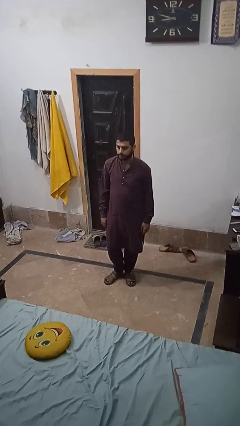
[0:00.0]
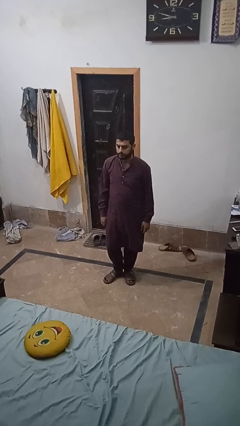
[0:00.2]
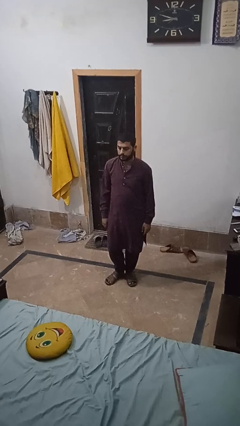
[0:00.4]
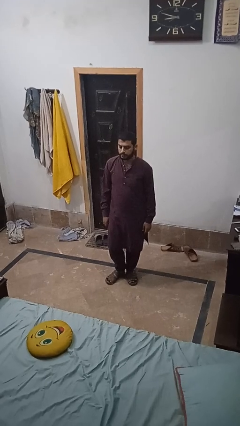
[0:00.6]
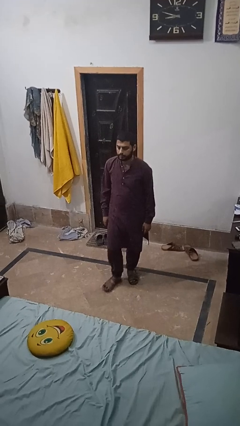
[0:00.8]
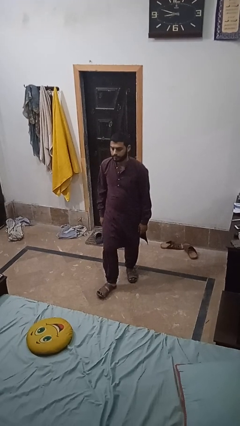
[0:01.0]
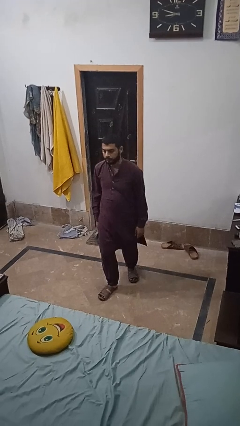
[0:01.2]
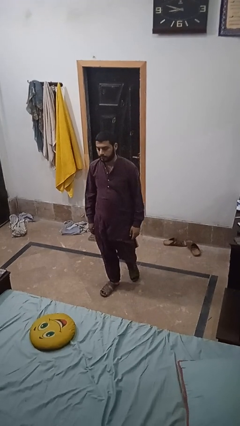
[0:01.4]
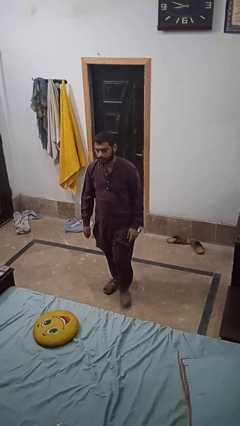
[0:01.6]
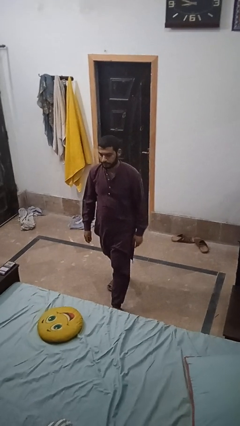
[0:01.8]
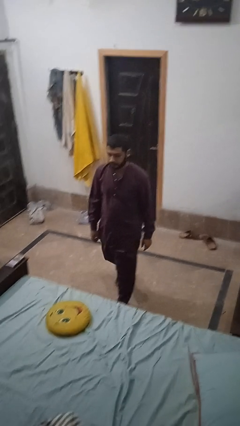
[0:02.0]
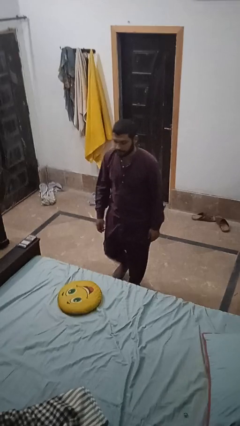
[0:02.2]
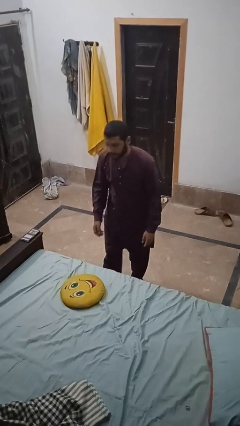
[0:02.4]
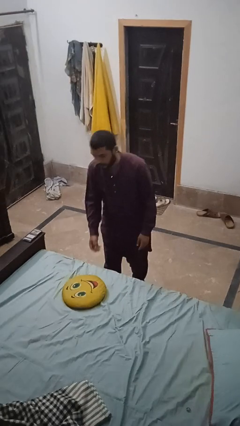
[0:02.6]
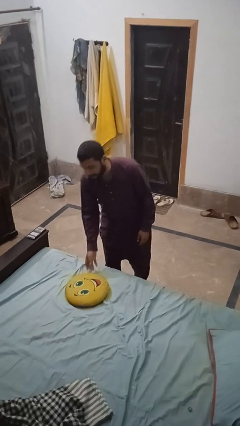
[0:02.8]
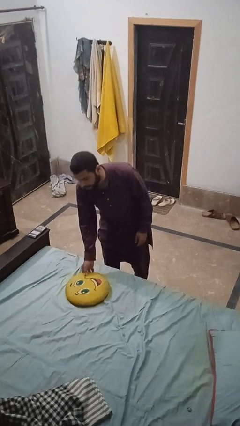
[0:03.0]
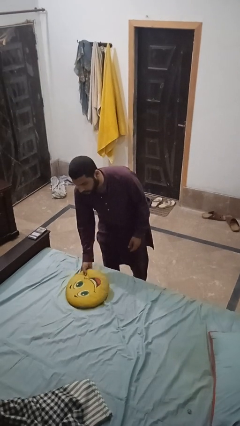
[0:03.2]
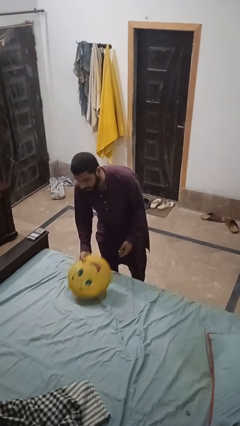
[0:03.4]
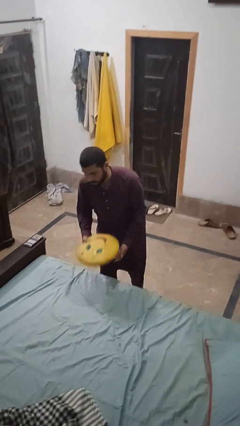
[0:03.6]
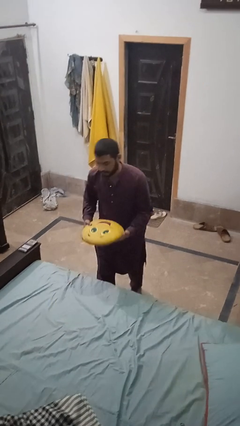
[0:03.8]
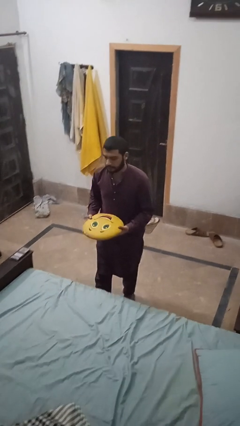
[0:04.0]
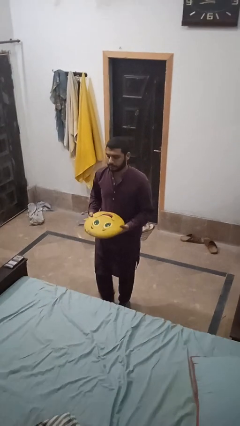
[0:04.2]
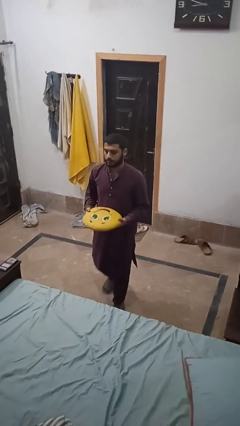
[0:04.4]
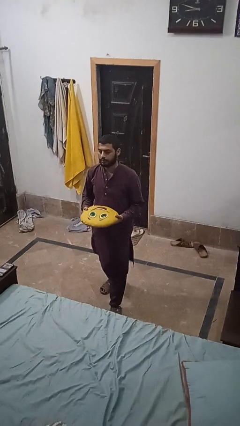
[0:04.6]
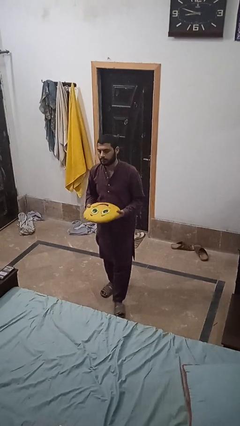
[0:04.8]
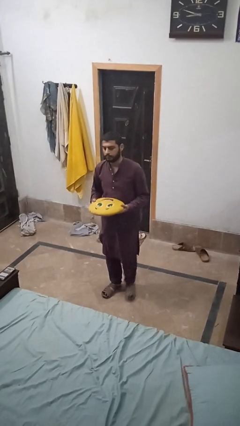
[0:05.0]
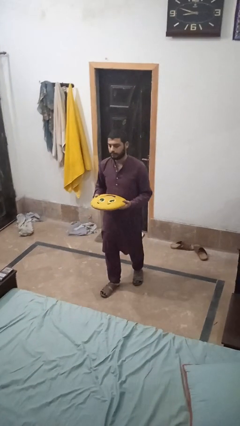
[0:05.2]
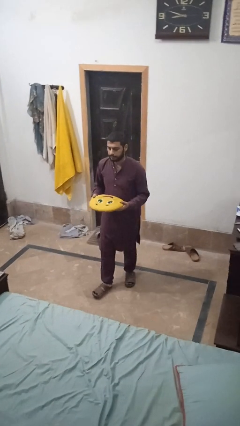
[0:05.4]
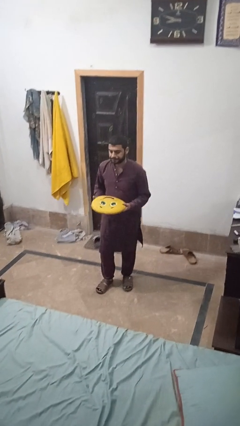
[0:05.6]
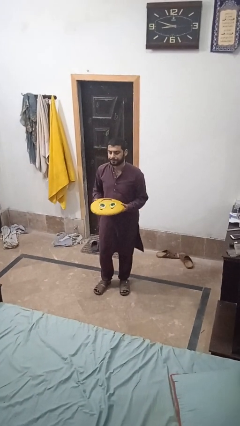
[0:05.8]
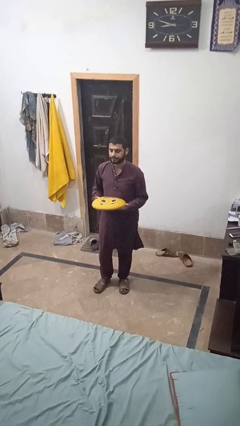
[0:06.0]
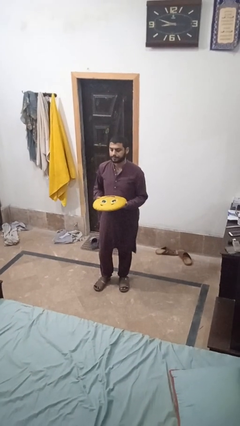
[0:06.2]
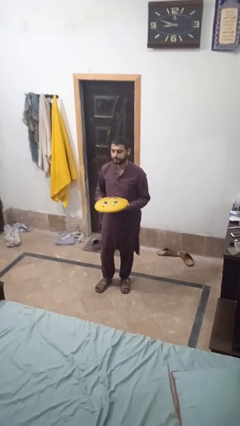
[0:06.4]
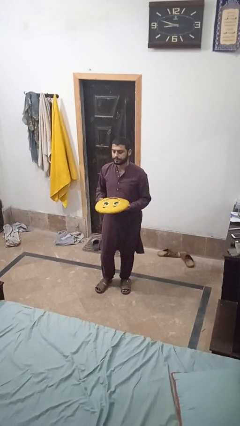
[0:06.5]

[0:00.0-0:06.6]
person picks up object from bed

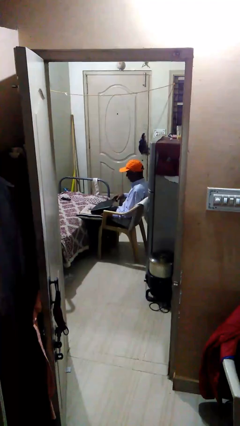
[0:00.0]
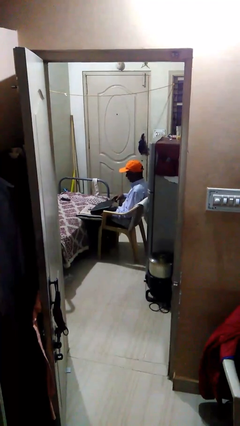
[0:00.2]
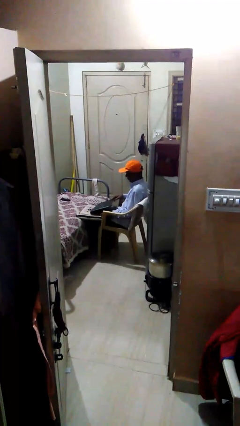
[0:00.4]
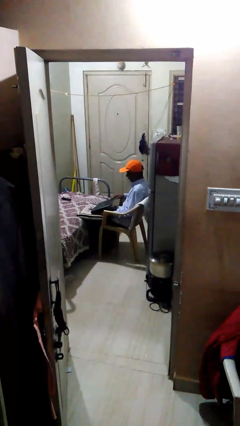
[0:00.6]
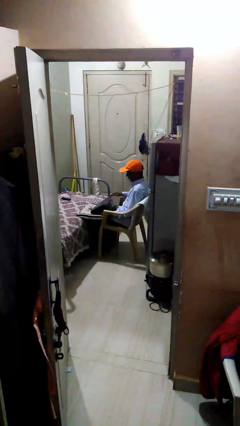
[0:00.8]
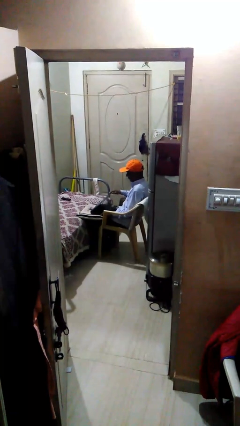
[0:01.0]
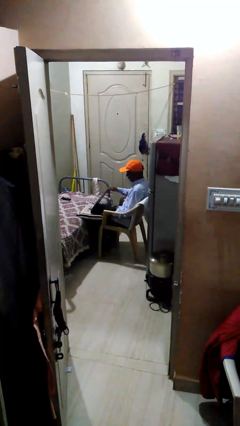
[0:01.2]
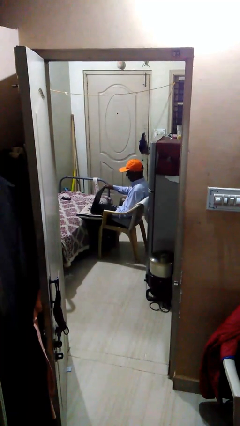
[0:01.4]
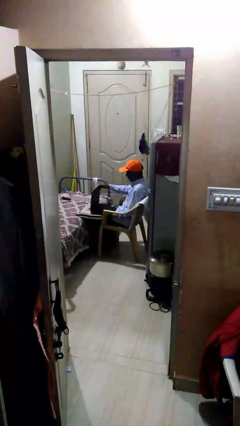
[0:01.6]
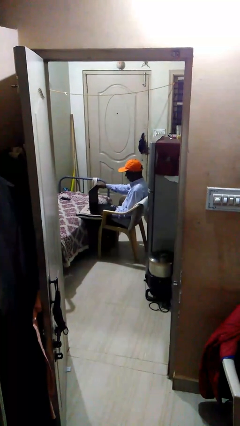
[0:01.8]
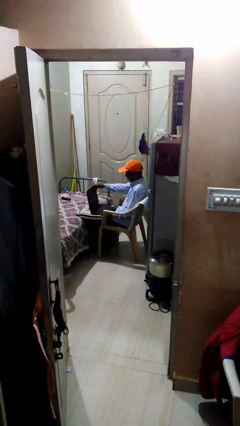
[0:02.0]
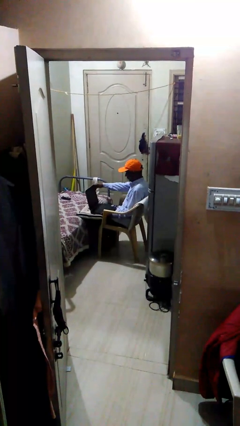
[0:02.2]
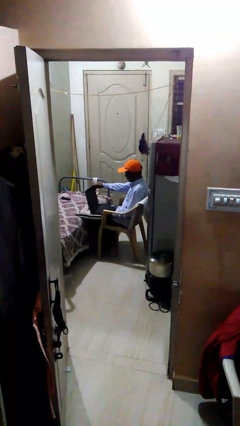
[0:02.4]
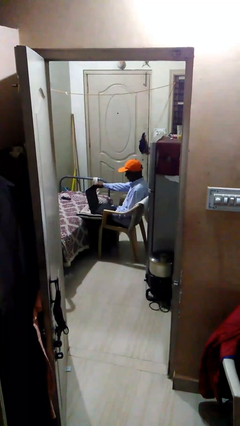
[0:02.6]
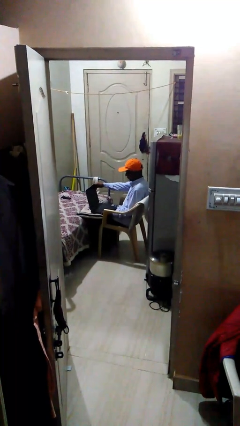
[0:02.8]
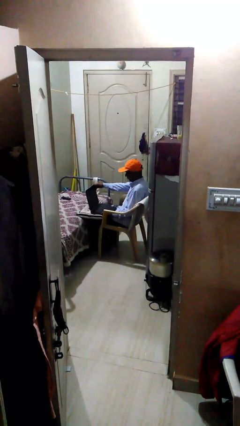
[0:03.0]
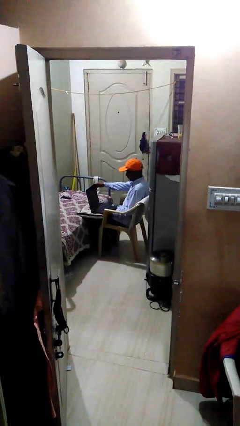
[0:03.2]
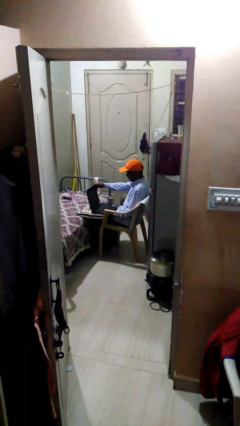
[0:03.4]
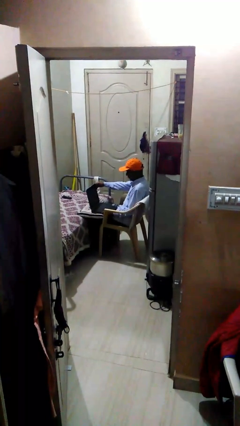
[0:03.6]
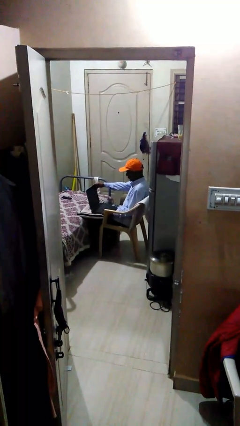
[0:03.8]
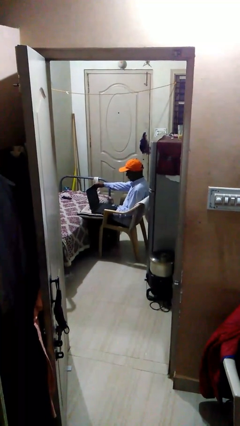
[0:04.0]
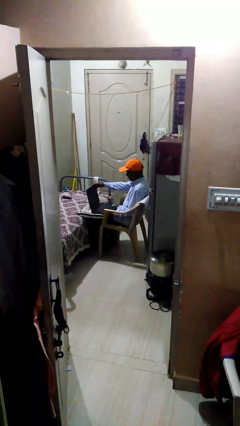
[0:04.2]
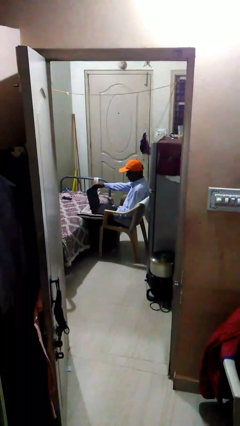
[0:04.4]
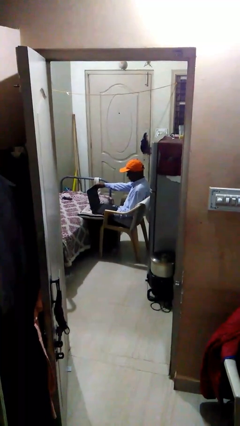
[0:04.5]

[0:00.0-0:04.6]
person interacts with laptop

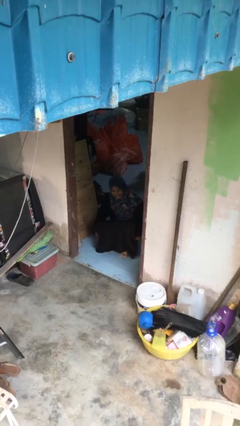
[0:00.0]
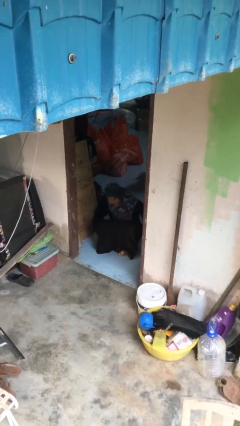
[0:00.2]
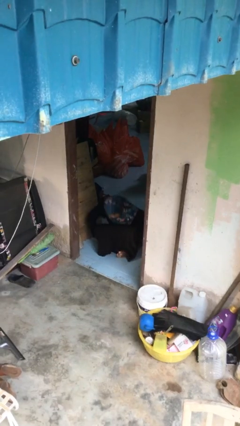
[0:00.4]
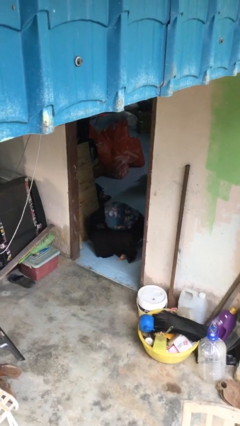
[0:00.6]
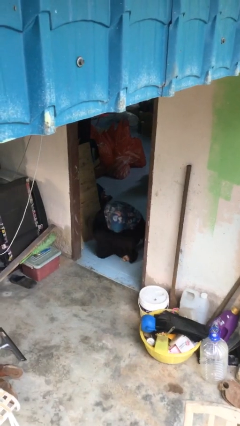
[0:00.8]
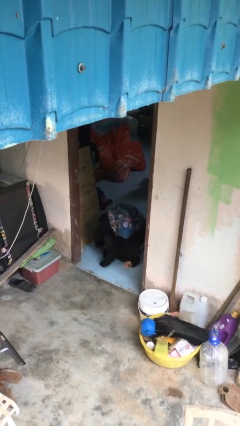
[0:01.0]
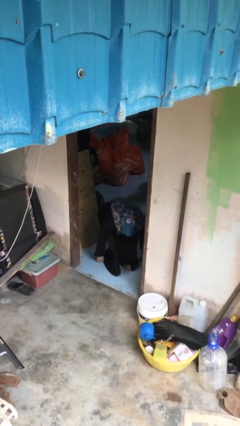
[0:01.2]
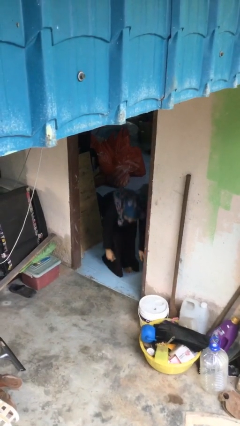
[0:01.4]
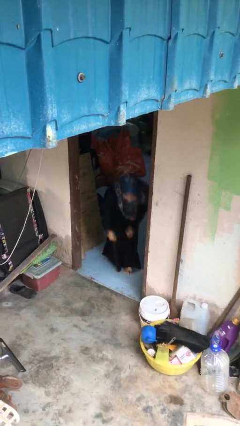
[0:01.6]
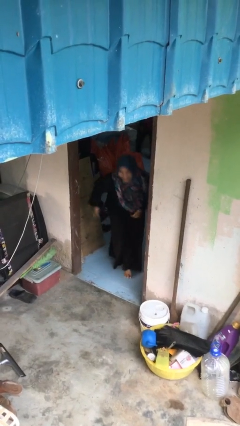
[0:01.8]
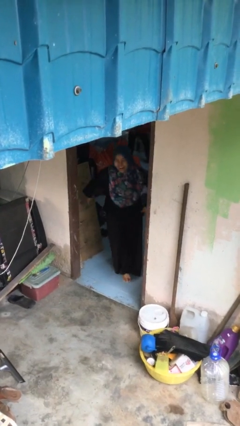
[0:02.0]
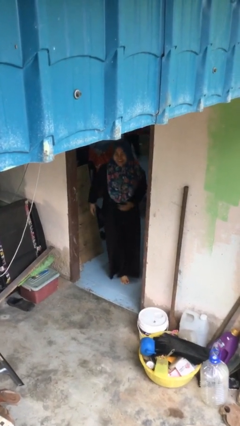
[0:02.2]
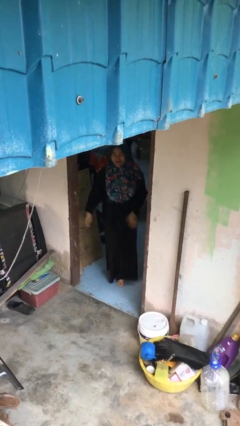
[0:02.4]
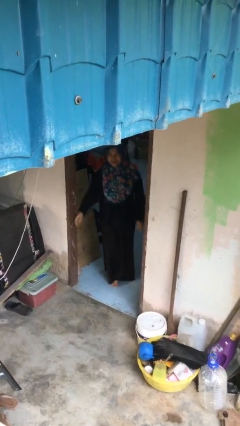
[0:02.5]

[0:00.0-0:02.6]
person stands up

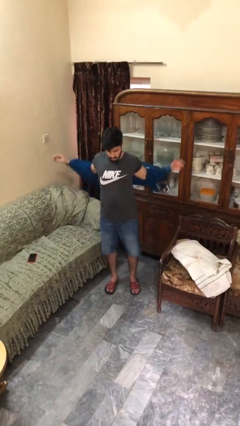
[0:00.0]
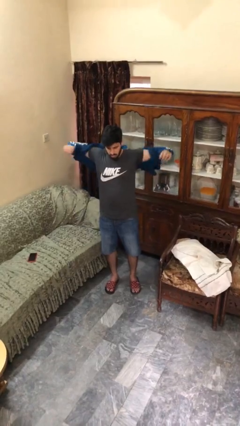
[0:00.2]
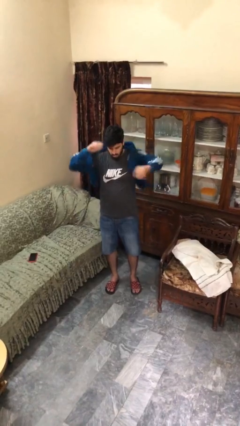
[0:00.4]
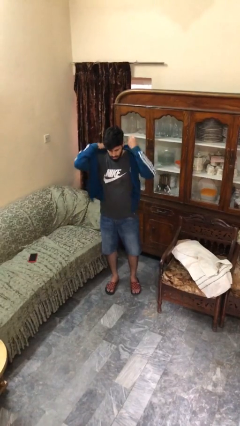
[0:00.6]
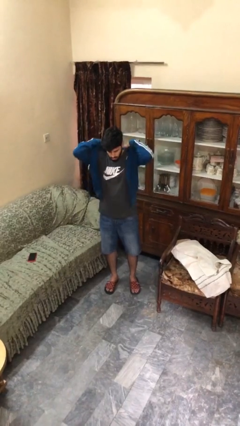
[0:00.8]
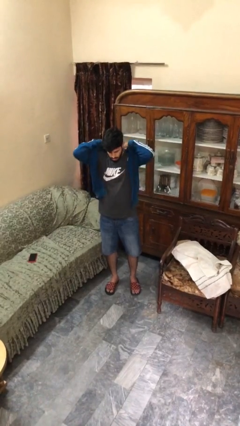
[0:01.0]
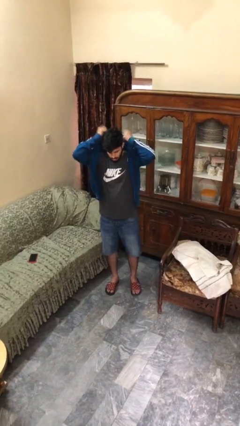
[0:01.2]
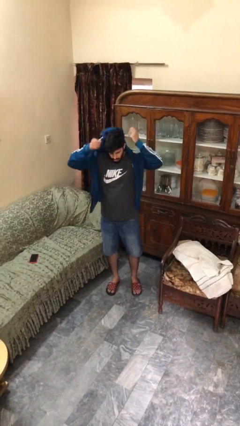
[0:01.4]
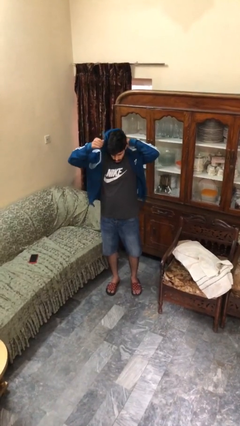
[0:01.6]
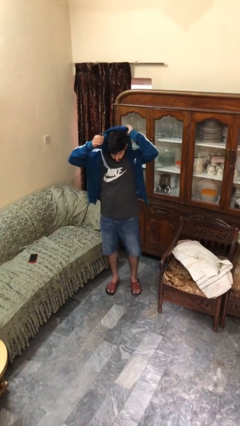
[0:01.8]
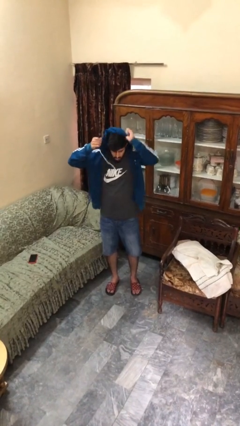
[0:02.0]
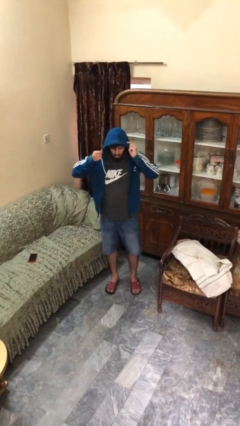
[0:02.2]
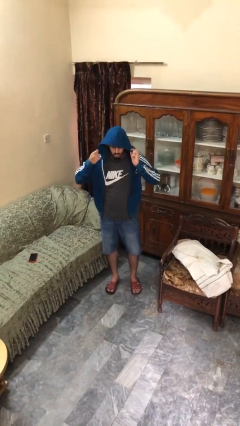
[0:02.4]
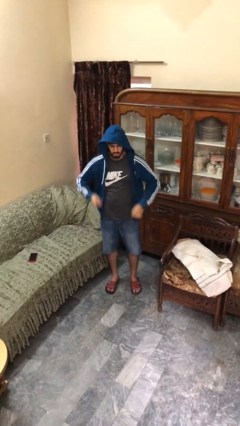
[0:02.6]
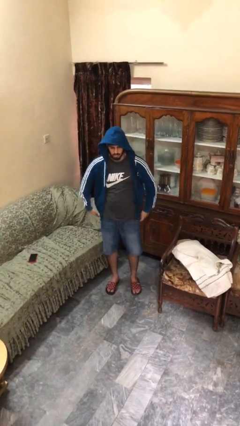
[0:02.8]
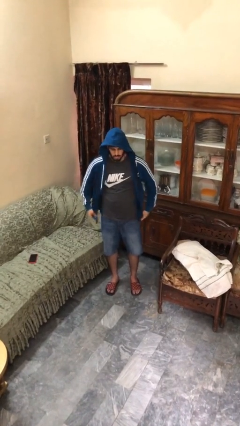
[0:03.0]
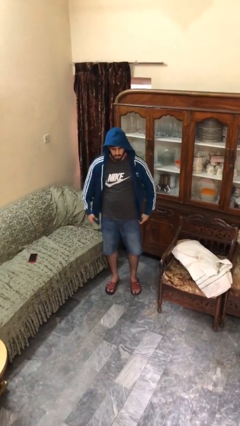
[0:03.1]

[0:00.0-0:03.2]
person puts on hoodie

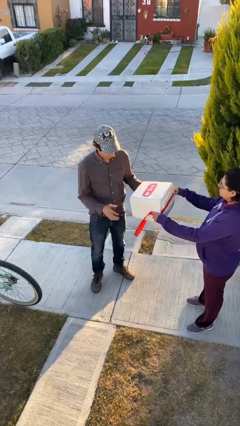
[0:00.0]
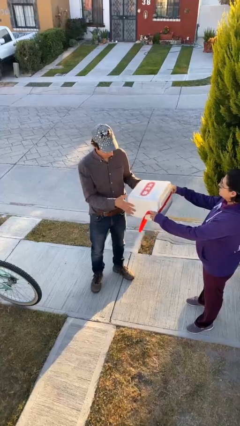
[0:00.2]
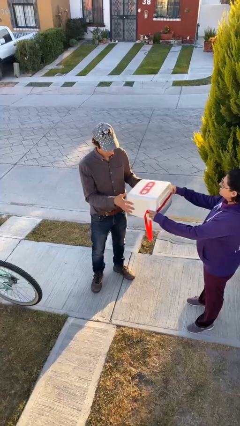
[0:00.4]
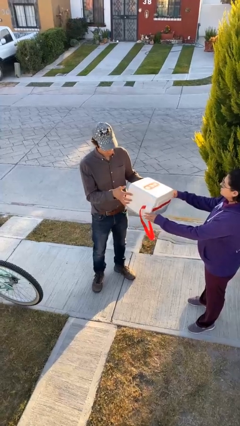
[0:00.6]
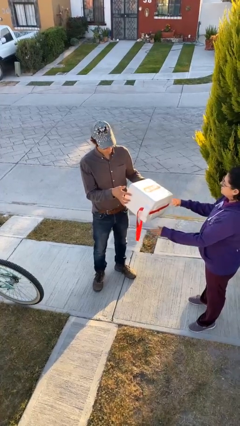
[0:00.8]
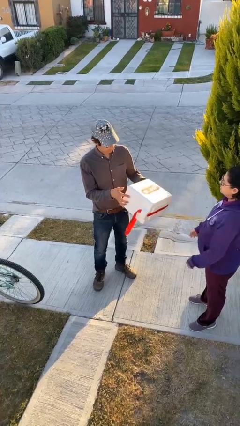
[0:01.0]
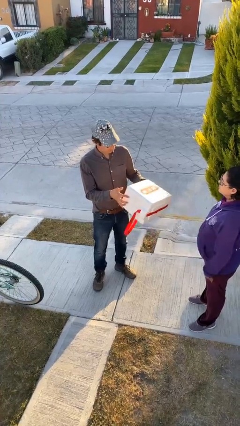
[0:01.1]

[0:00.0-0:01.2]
person transfers object to person
